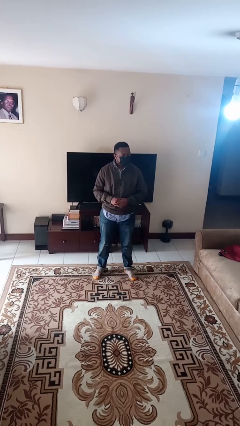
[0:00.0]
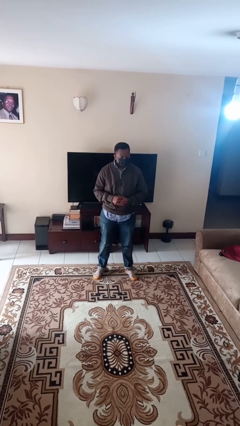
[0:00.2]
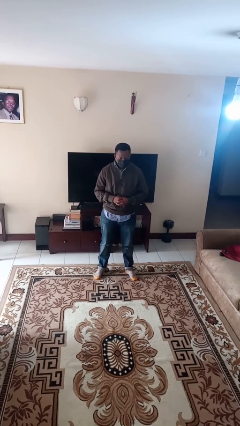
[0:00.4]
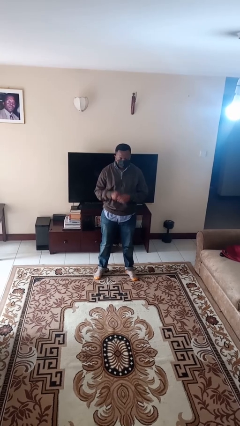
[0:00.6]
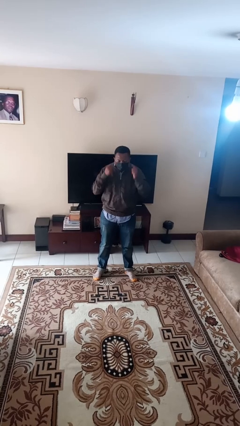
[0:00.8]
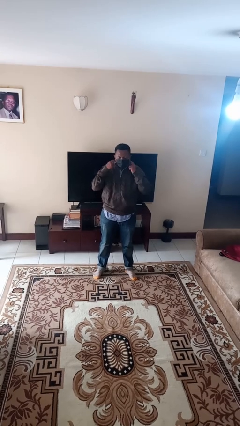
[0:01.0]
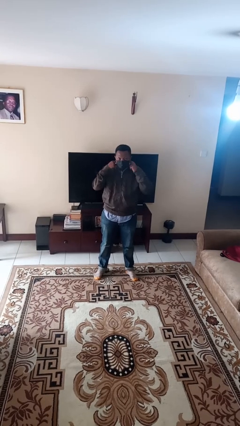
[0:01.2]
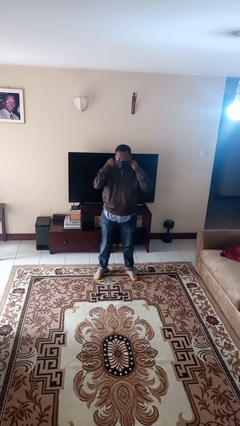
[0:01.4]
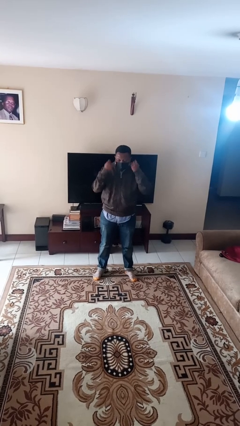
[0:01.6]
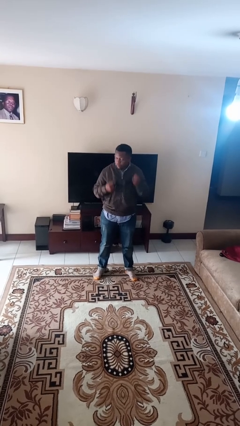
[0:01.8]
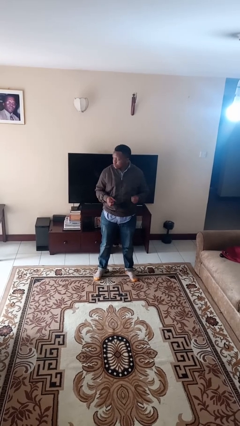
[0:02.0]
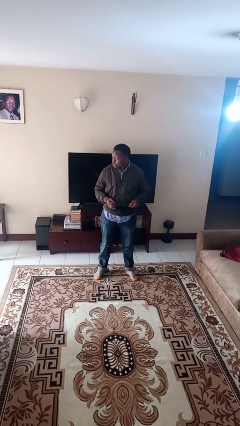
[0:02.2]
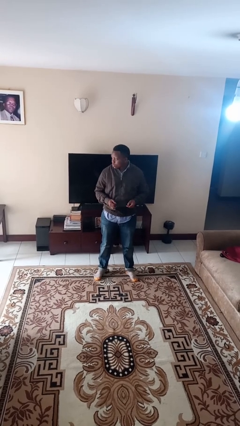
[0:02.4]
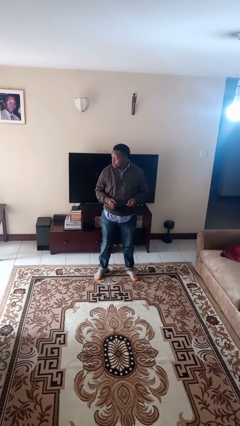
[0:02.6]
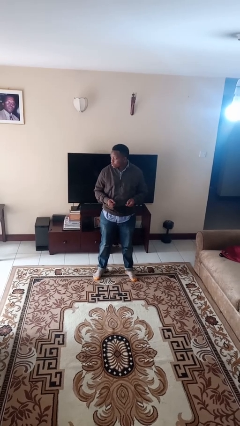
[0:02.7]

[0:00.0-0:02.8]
person takes off facemask

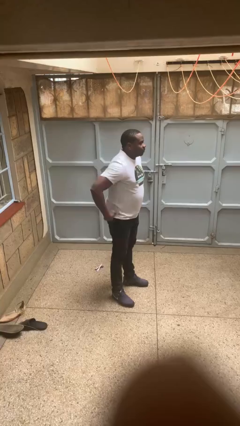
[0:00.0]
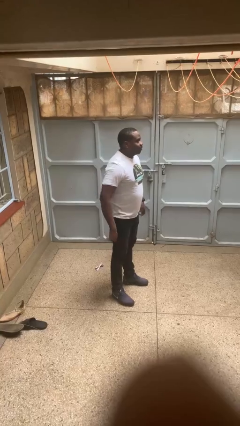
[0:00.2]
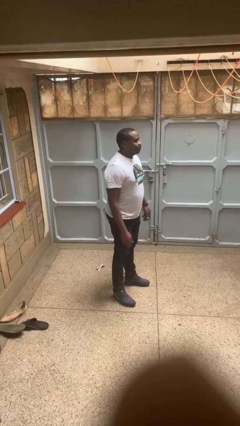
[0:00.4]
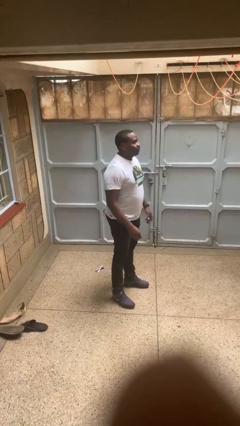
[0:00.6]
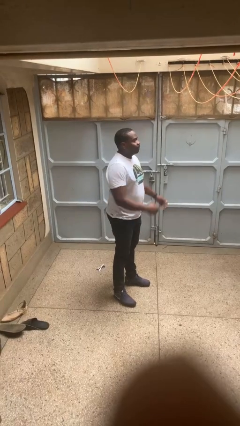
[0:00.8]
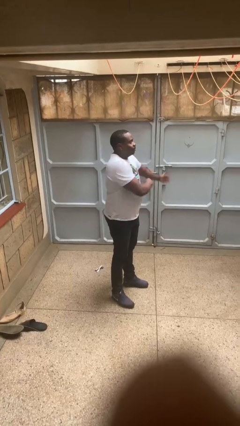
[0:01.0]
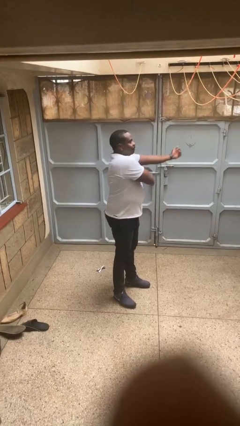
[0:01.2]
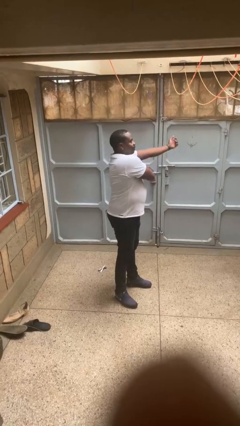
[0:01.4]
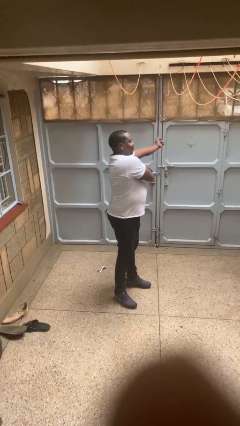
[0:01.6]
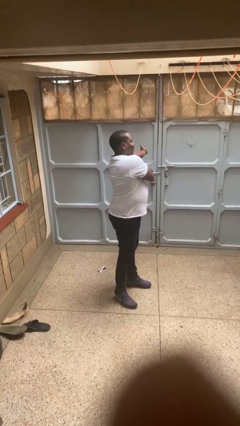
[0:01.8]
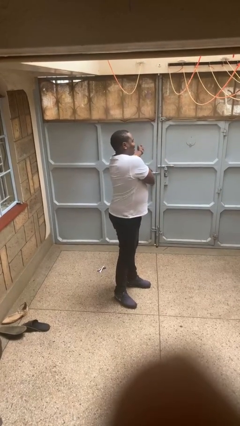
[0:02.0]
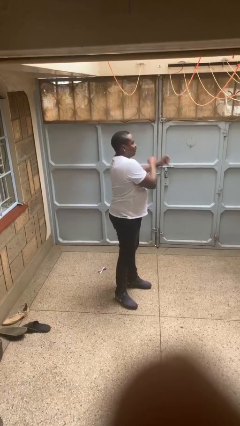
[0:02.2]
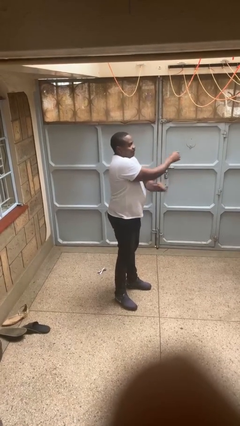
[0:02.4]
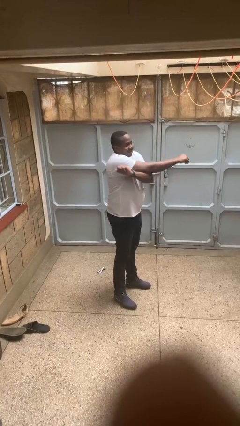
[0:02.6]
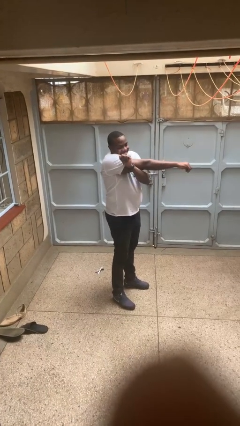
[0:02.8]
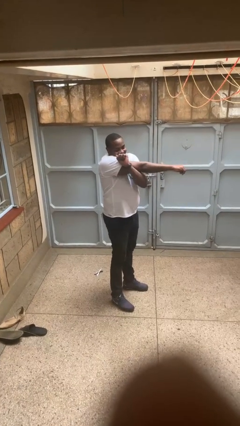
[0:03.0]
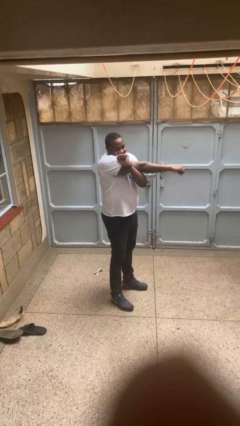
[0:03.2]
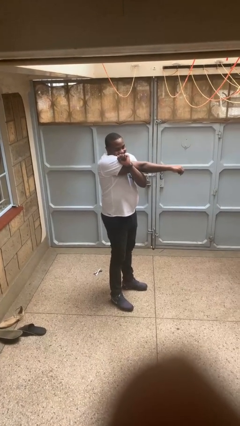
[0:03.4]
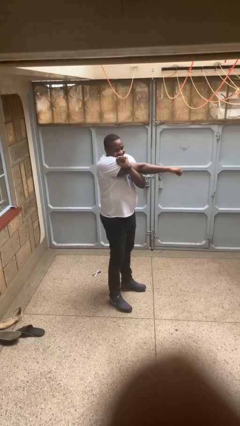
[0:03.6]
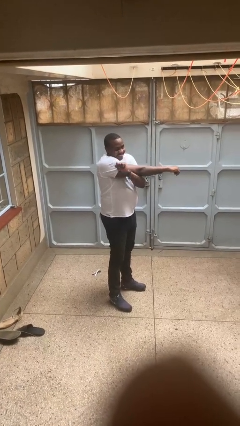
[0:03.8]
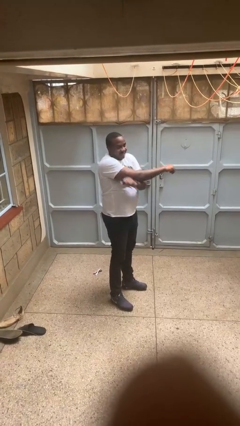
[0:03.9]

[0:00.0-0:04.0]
person stretches arms to side

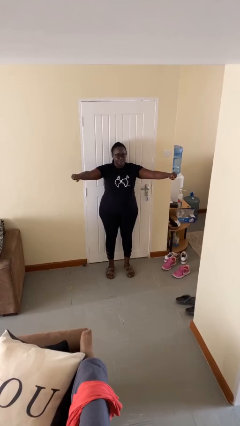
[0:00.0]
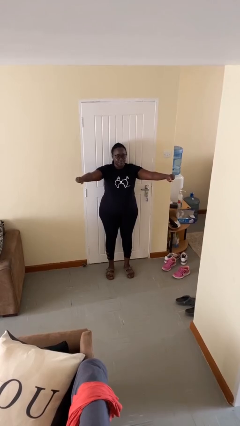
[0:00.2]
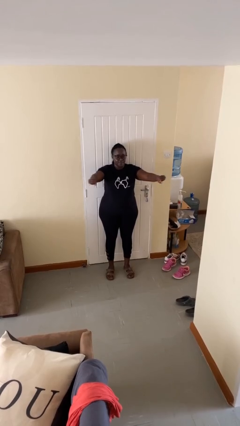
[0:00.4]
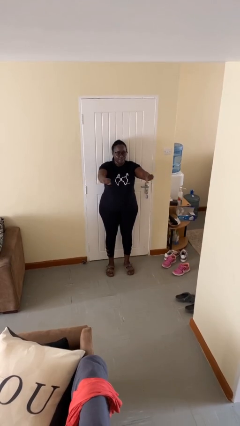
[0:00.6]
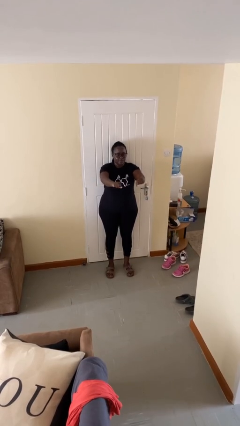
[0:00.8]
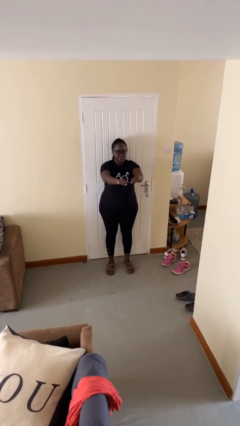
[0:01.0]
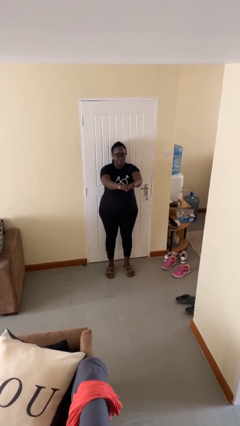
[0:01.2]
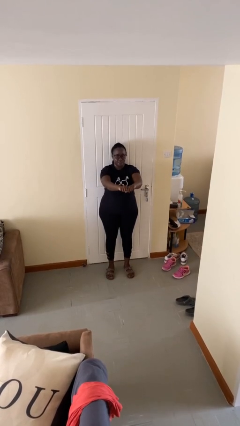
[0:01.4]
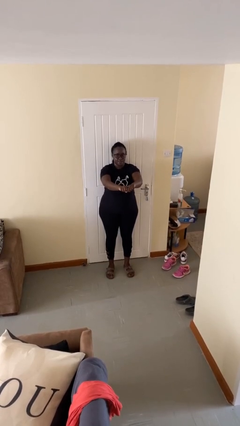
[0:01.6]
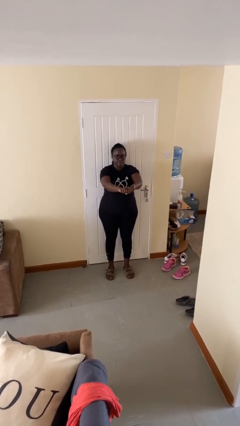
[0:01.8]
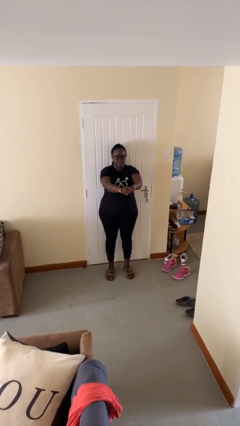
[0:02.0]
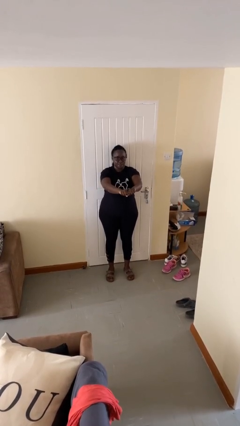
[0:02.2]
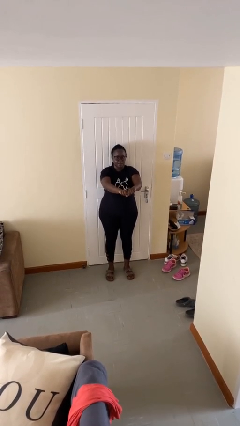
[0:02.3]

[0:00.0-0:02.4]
person gestures zoom out

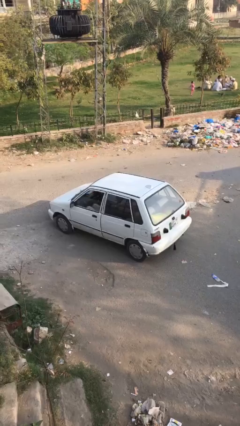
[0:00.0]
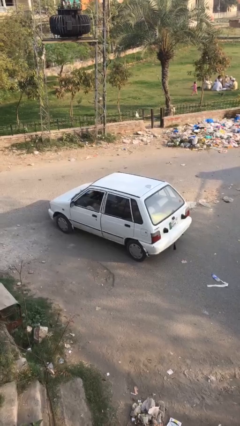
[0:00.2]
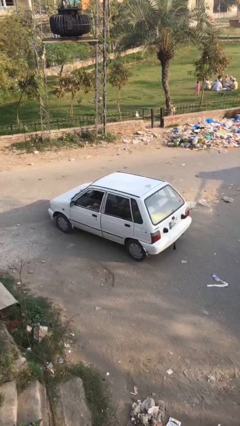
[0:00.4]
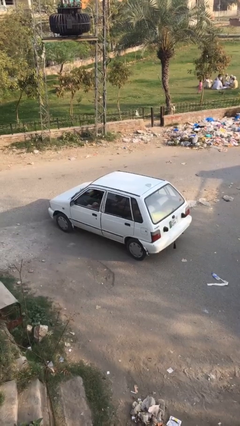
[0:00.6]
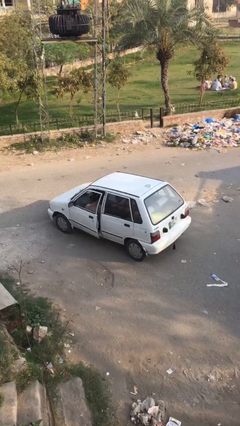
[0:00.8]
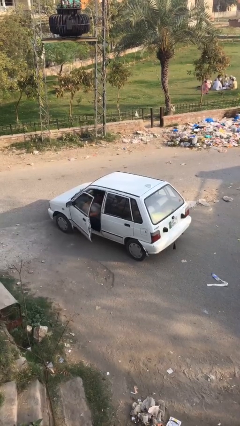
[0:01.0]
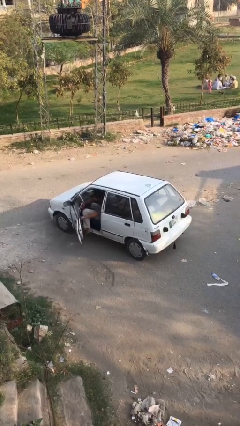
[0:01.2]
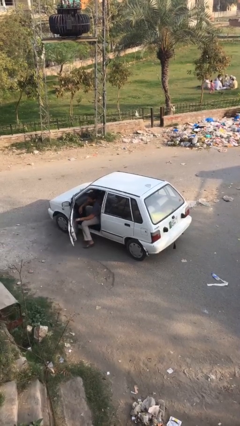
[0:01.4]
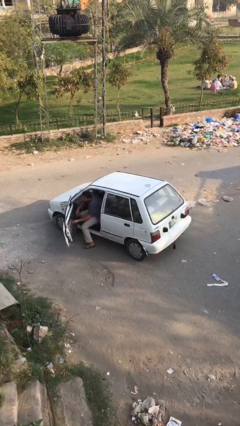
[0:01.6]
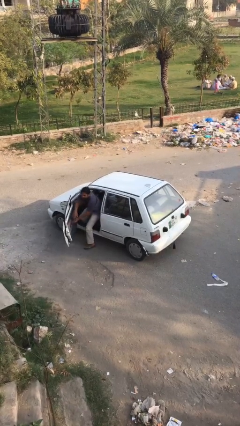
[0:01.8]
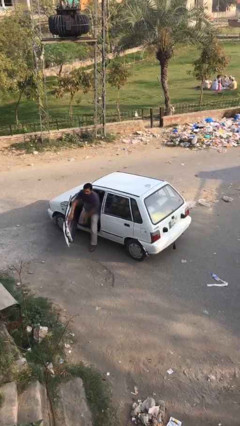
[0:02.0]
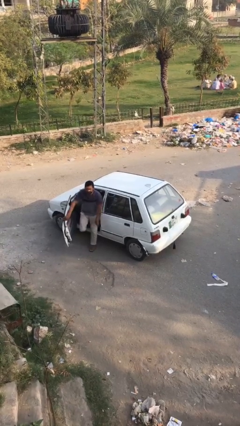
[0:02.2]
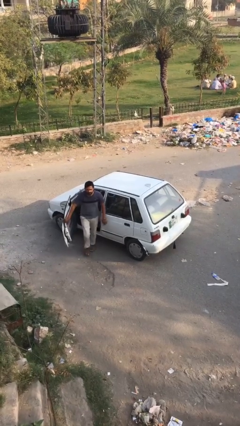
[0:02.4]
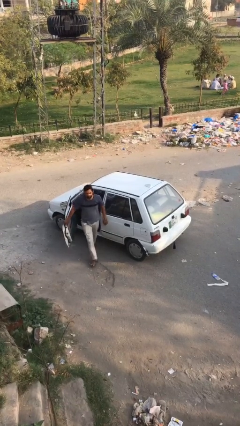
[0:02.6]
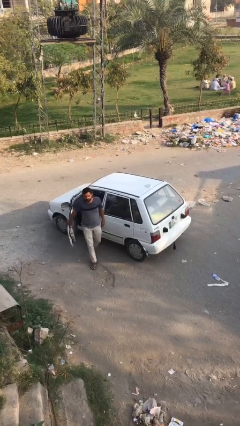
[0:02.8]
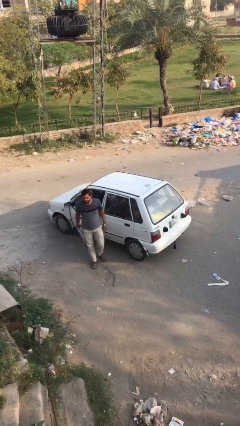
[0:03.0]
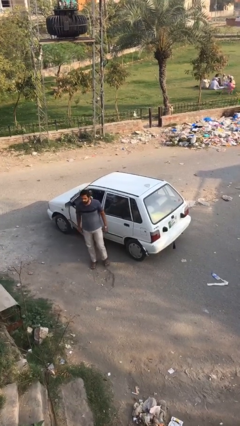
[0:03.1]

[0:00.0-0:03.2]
car drops off person

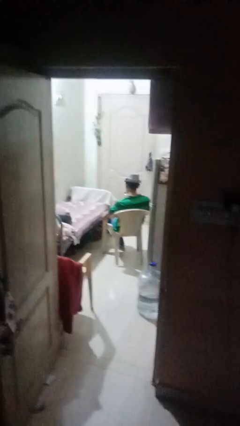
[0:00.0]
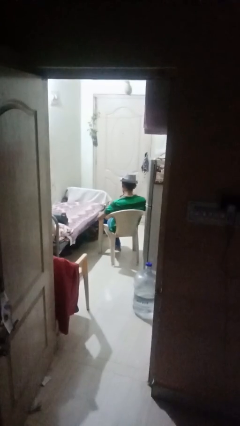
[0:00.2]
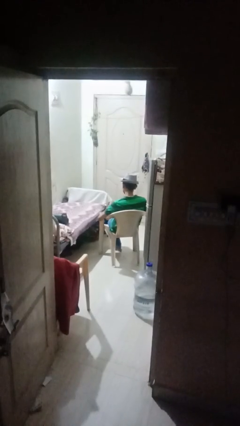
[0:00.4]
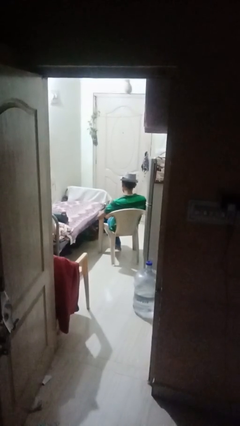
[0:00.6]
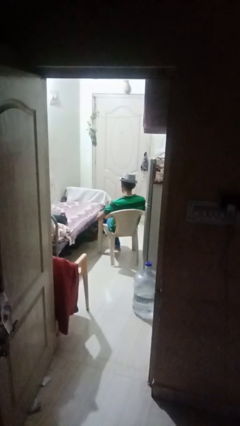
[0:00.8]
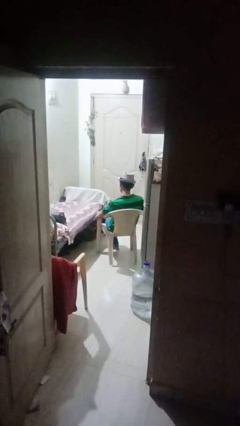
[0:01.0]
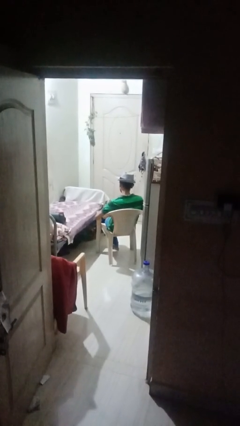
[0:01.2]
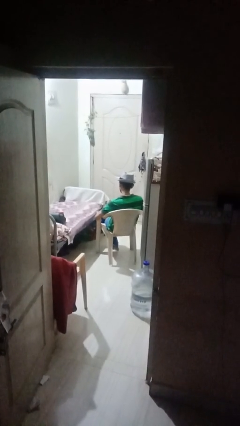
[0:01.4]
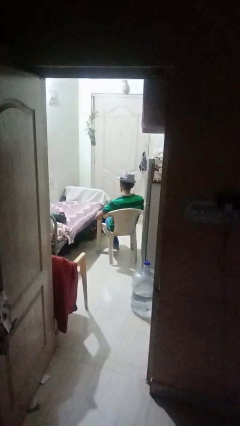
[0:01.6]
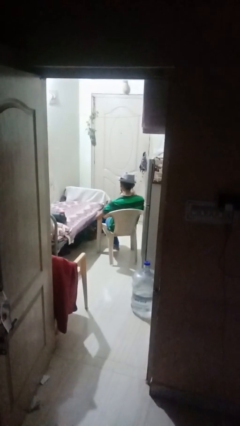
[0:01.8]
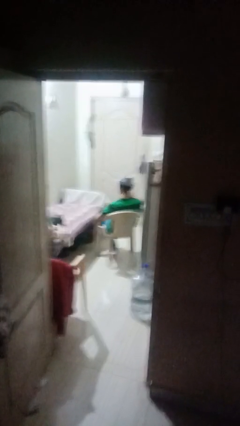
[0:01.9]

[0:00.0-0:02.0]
person stirs mug

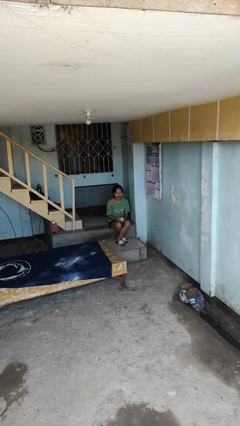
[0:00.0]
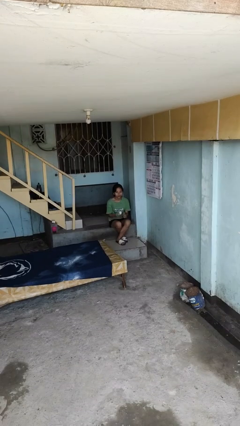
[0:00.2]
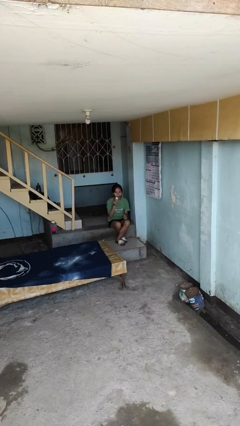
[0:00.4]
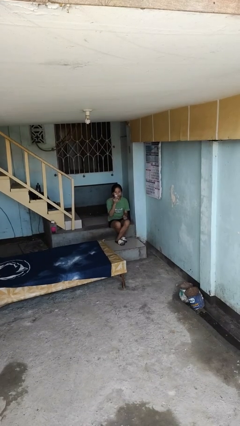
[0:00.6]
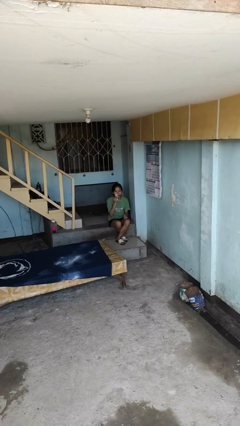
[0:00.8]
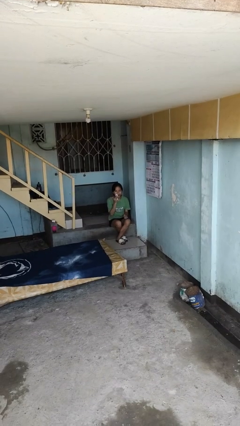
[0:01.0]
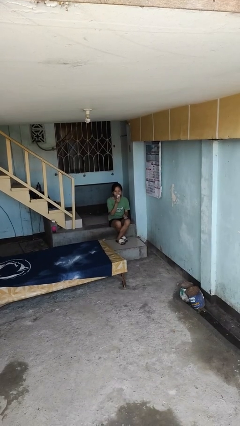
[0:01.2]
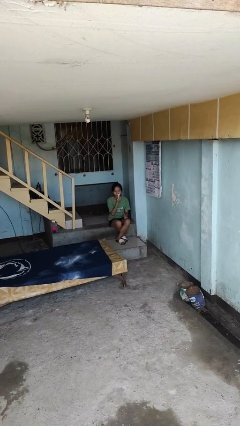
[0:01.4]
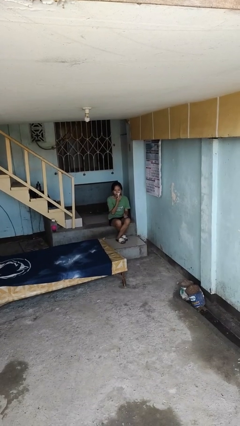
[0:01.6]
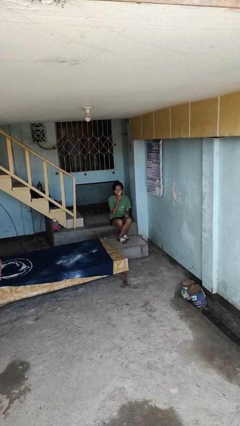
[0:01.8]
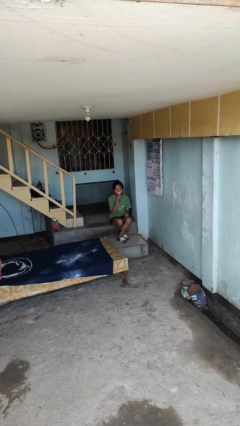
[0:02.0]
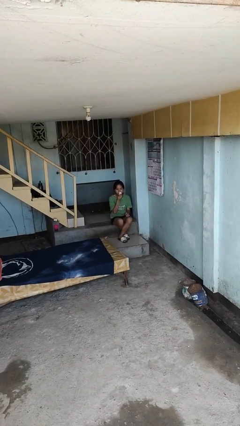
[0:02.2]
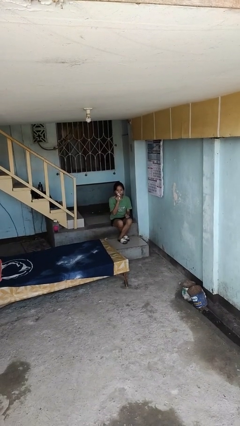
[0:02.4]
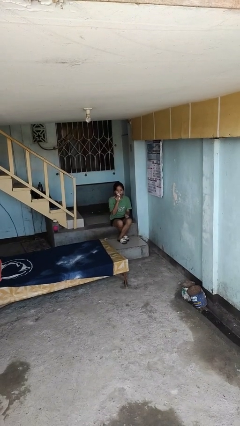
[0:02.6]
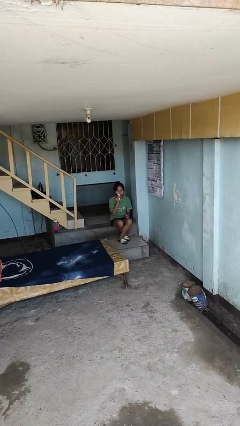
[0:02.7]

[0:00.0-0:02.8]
person wipes mouth with napkin

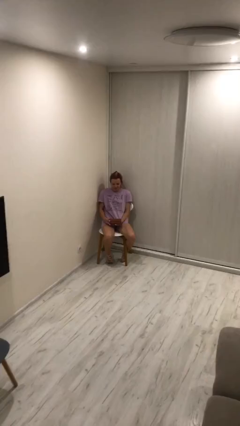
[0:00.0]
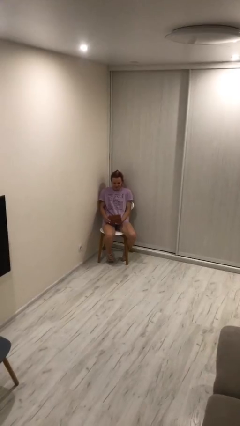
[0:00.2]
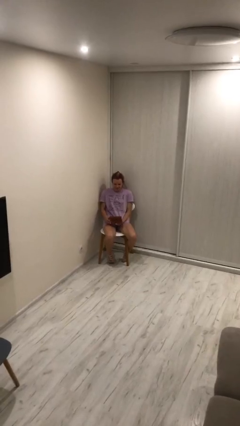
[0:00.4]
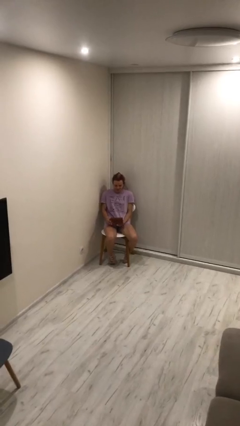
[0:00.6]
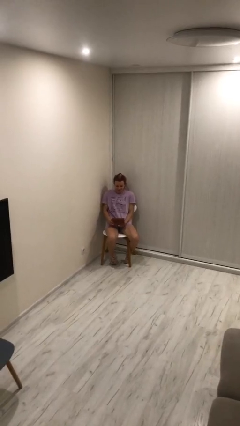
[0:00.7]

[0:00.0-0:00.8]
person opens jewelry box
